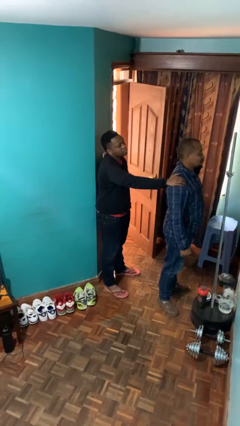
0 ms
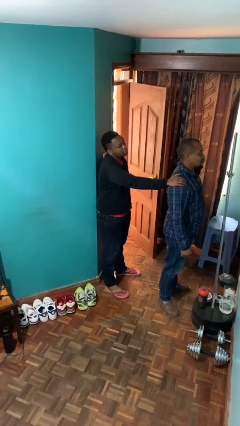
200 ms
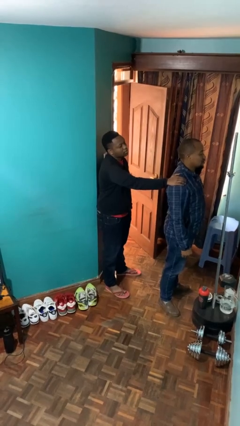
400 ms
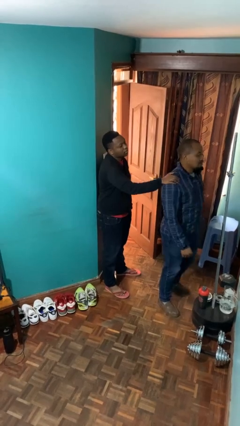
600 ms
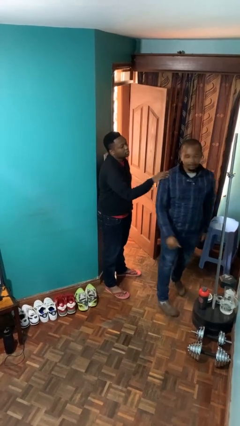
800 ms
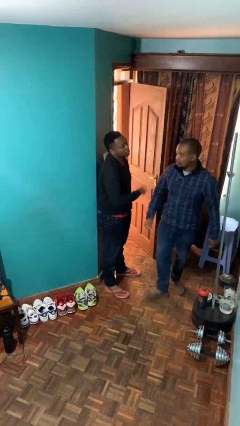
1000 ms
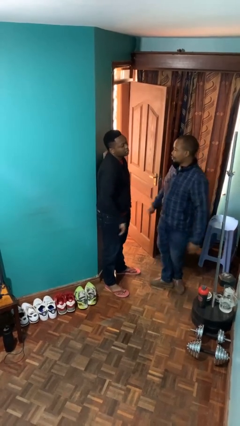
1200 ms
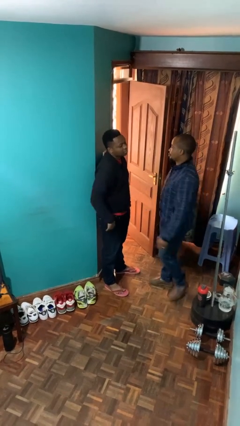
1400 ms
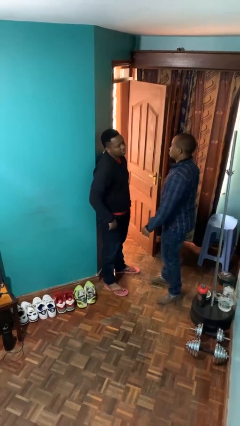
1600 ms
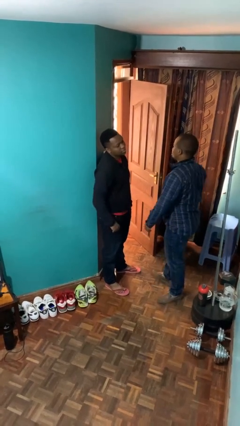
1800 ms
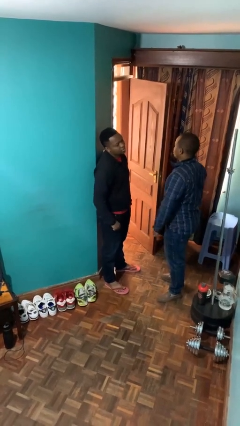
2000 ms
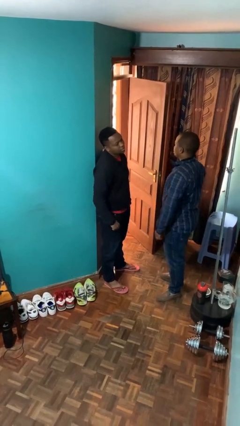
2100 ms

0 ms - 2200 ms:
person spins person around

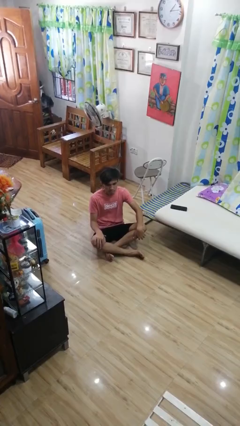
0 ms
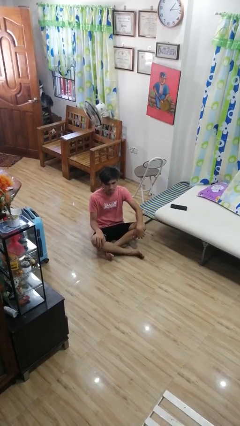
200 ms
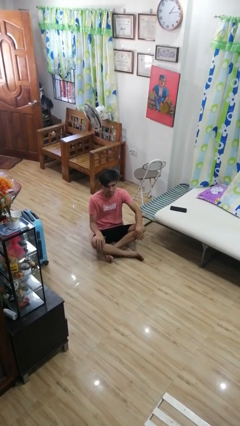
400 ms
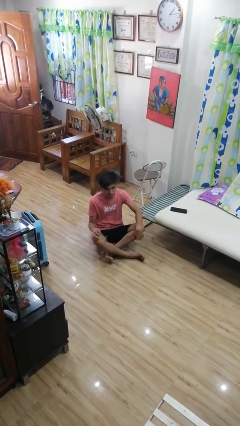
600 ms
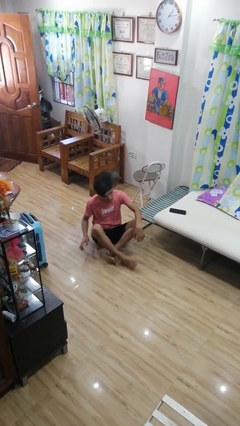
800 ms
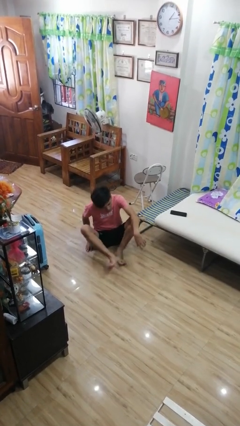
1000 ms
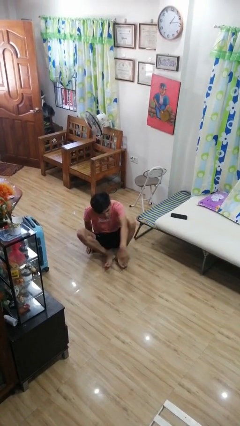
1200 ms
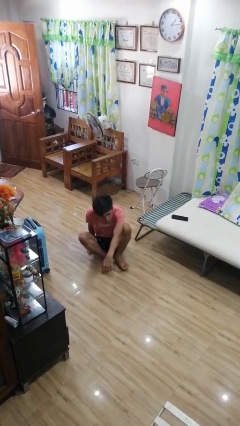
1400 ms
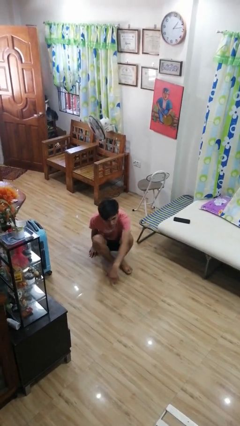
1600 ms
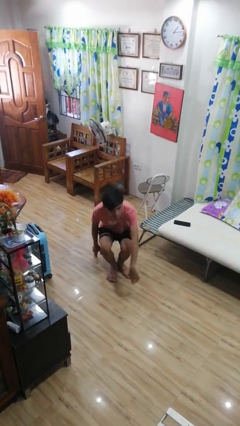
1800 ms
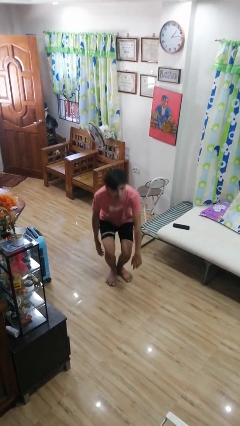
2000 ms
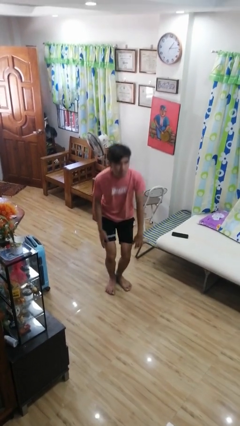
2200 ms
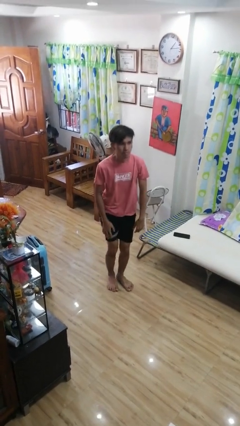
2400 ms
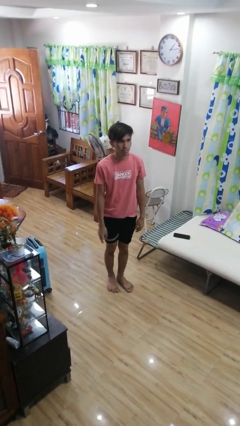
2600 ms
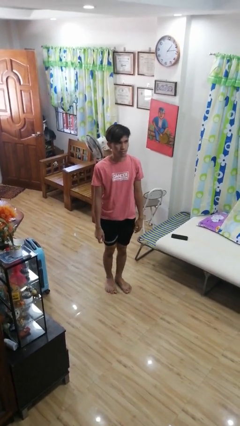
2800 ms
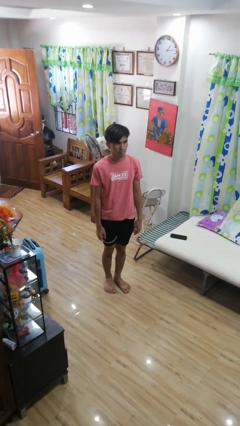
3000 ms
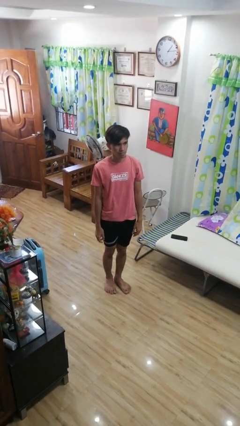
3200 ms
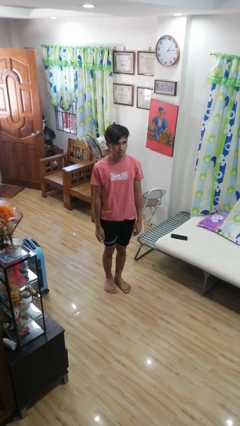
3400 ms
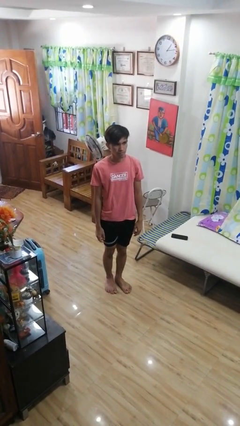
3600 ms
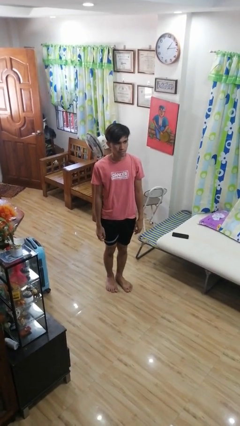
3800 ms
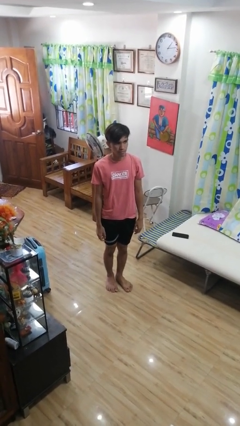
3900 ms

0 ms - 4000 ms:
person stands up from floor

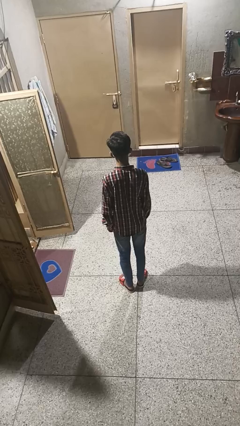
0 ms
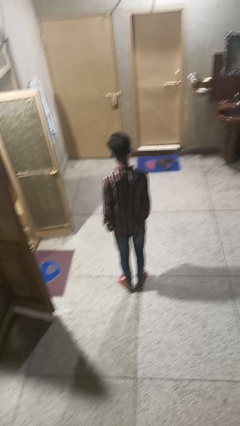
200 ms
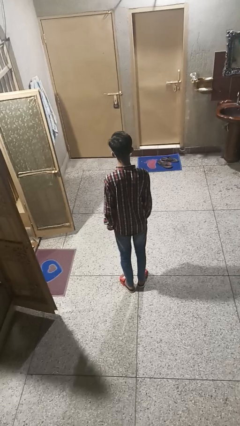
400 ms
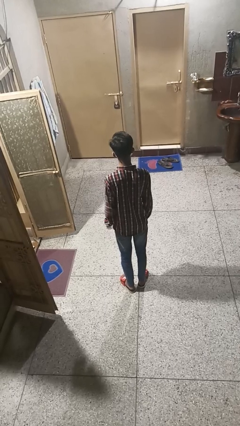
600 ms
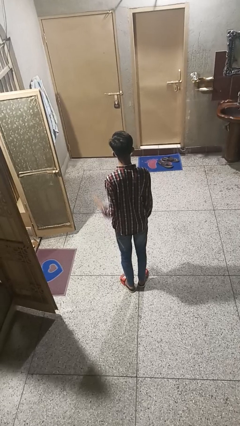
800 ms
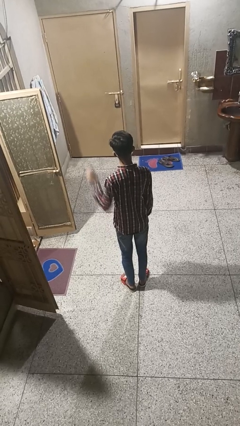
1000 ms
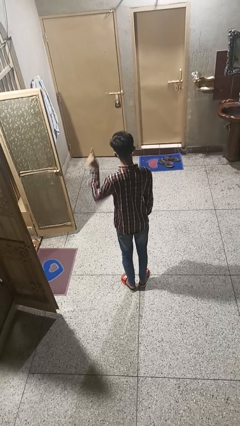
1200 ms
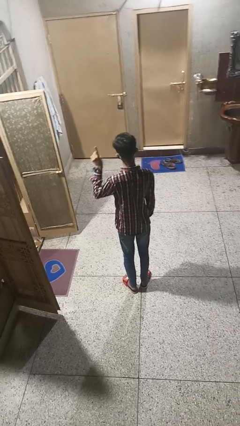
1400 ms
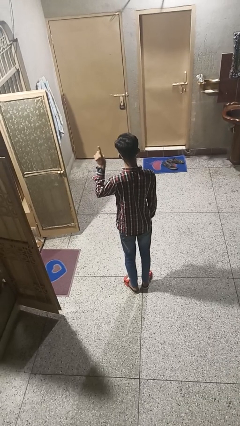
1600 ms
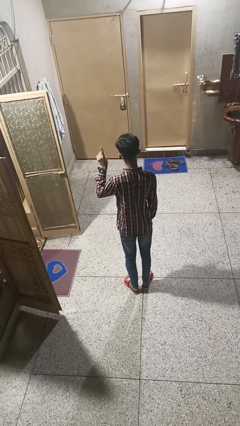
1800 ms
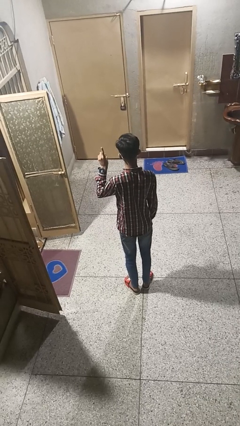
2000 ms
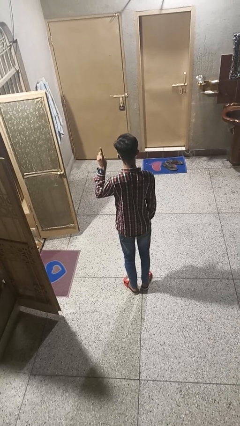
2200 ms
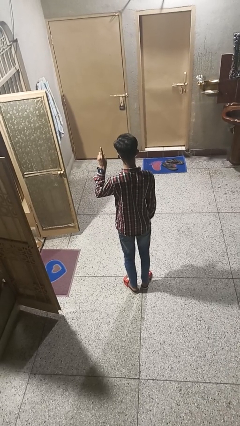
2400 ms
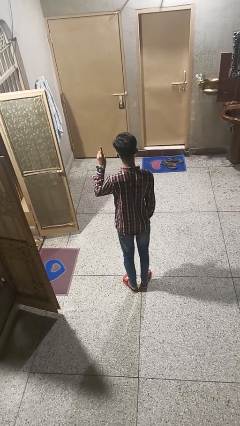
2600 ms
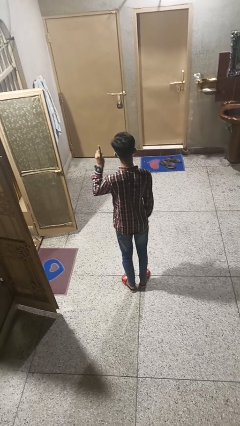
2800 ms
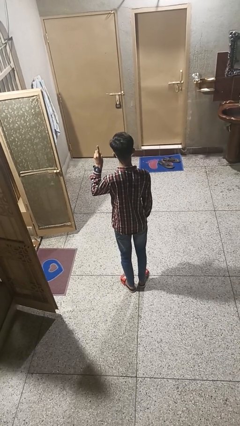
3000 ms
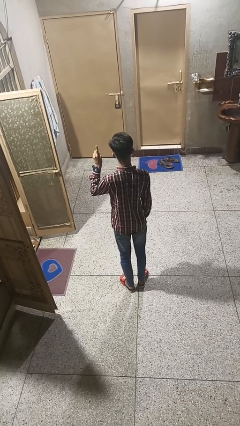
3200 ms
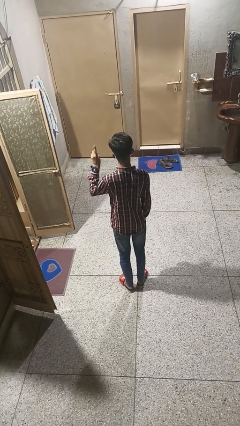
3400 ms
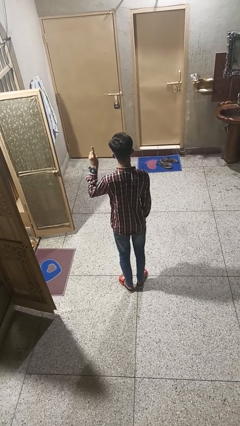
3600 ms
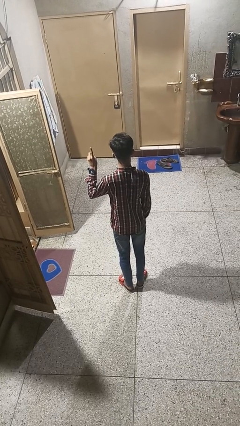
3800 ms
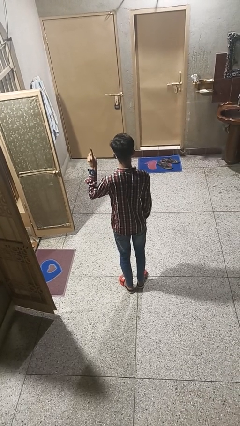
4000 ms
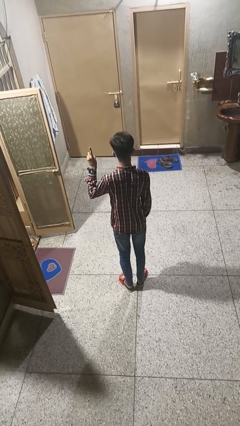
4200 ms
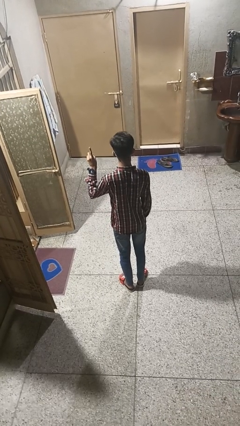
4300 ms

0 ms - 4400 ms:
person gestures number one

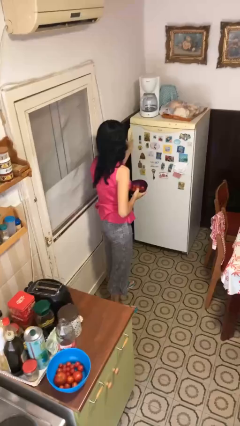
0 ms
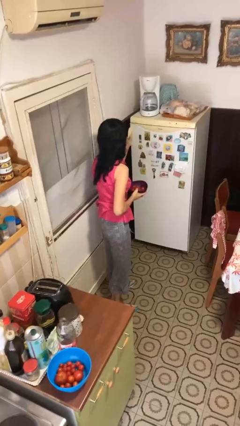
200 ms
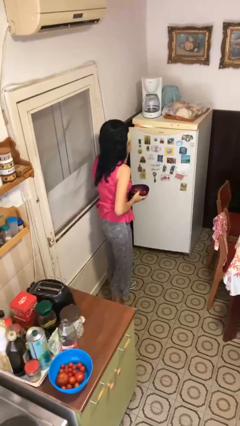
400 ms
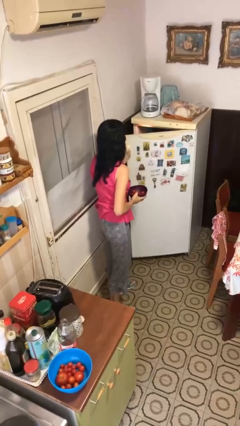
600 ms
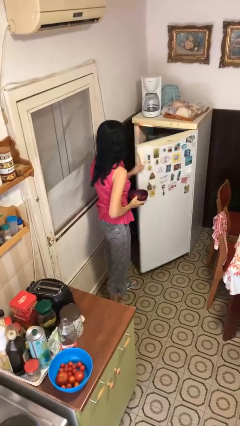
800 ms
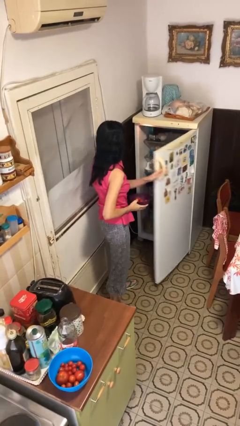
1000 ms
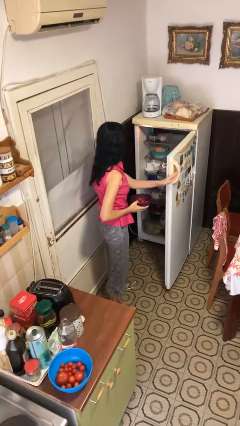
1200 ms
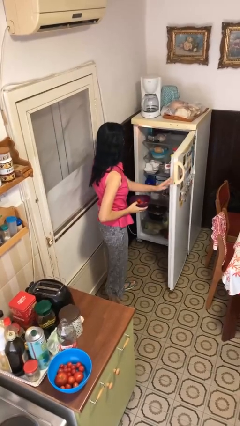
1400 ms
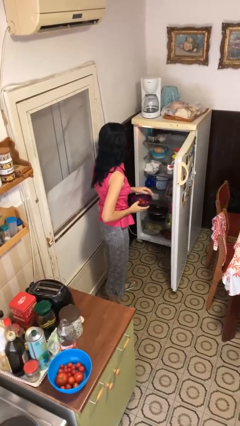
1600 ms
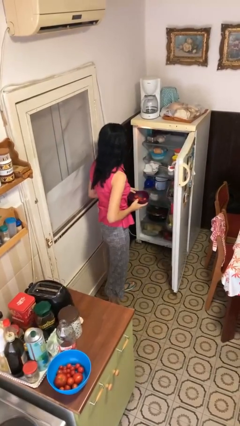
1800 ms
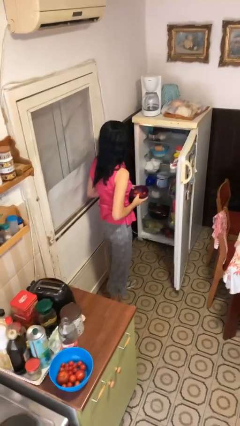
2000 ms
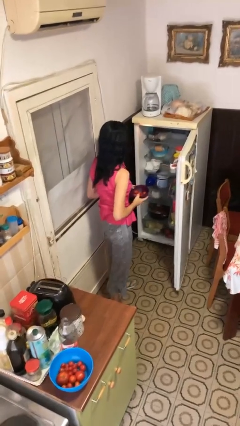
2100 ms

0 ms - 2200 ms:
person opens refrigerator

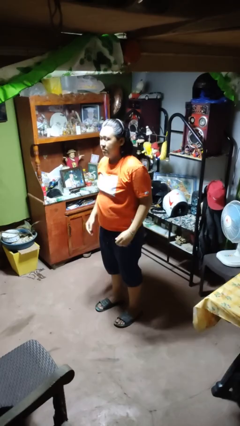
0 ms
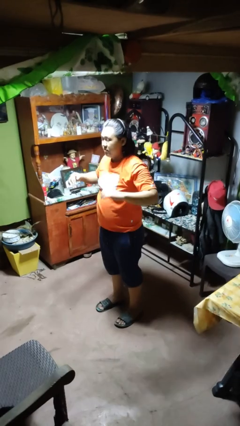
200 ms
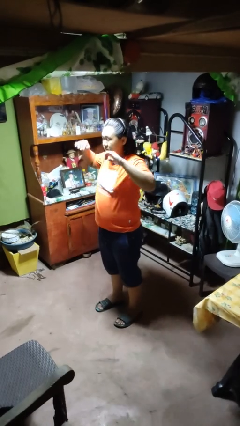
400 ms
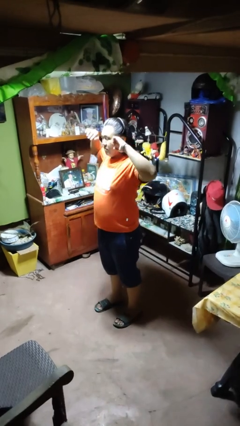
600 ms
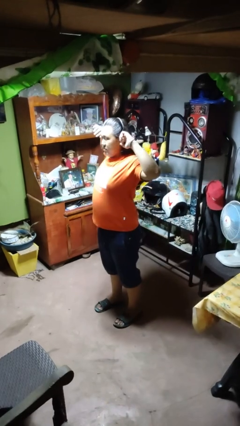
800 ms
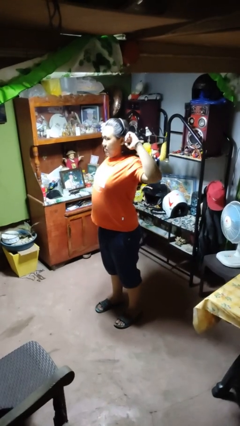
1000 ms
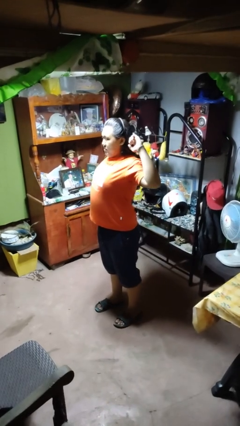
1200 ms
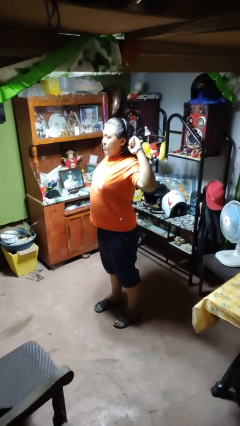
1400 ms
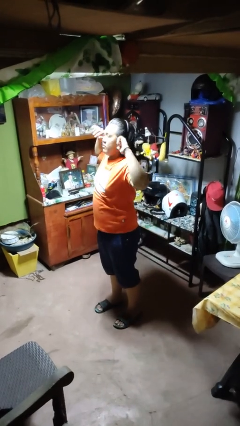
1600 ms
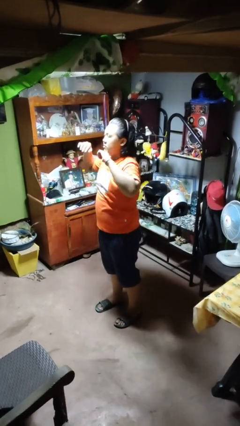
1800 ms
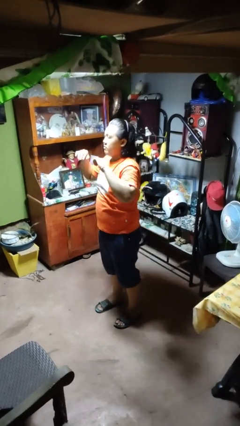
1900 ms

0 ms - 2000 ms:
person stretches arms to side

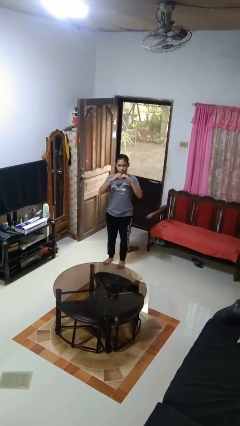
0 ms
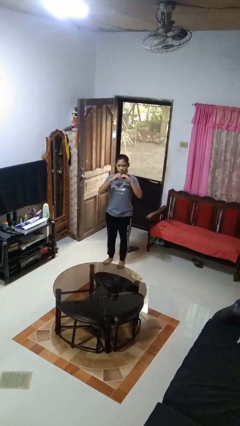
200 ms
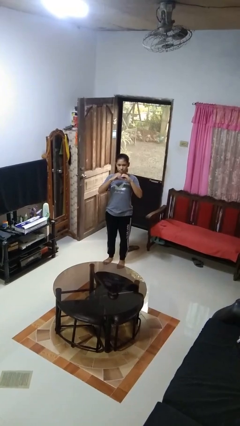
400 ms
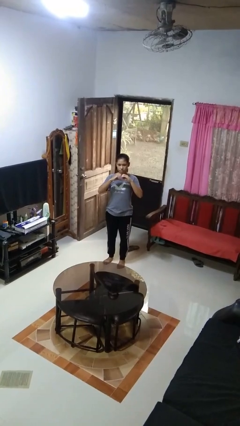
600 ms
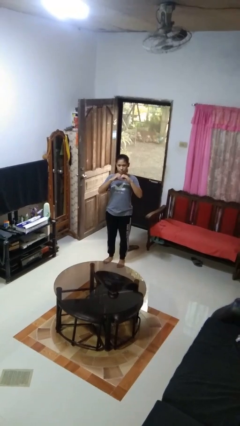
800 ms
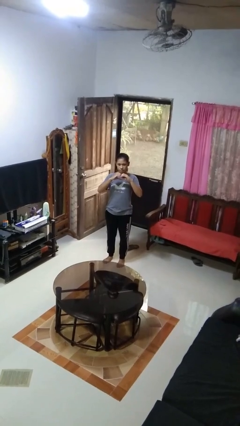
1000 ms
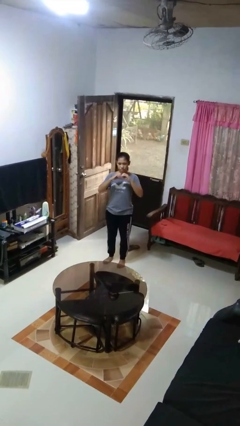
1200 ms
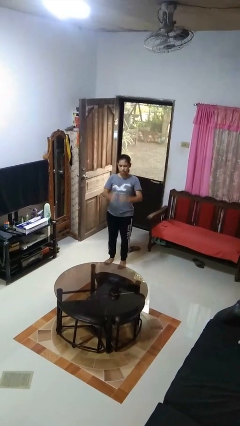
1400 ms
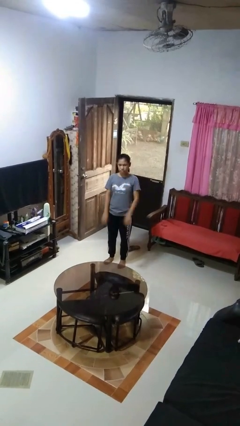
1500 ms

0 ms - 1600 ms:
person gestures heart

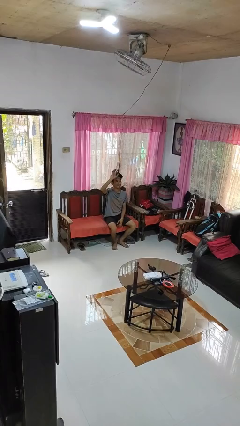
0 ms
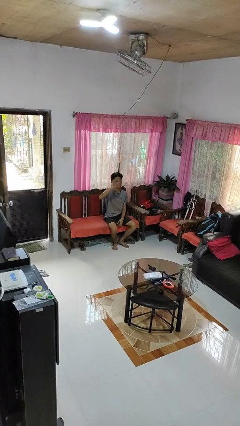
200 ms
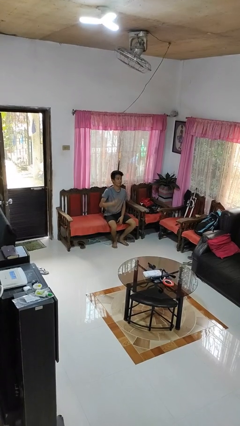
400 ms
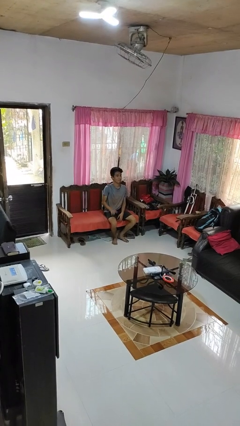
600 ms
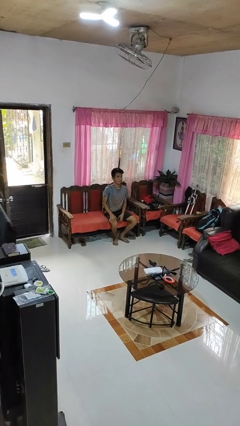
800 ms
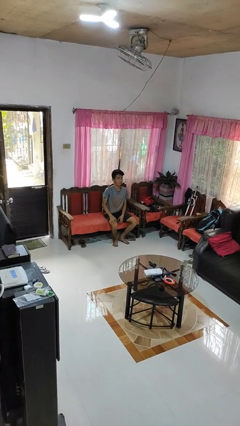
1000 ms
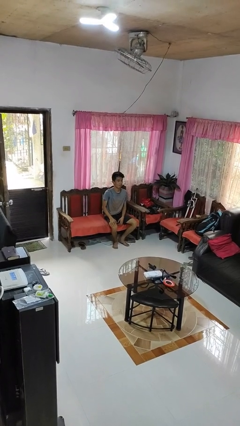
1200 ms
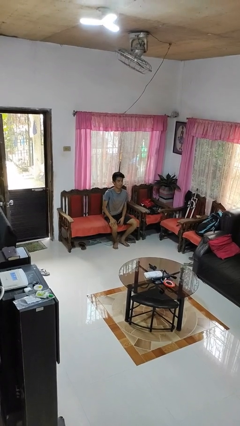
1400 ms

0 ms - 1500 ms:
person gestures lower hand
